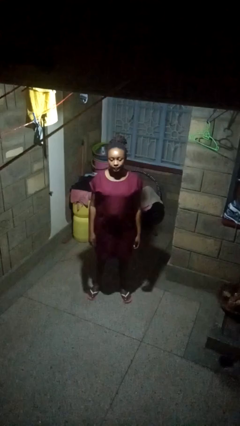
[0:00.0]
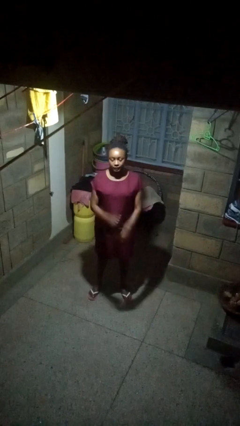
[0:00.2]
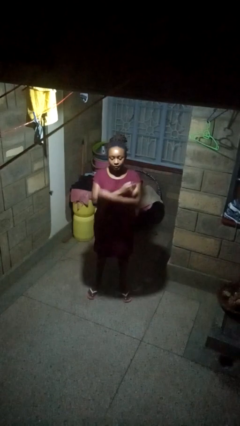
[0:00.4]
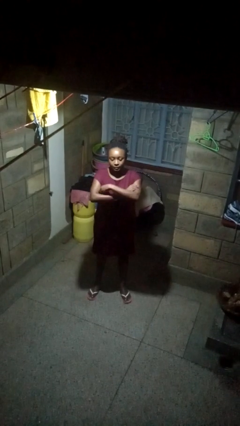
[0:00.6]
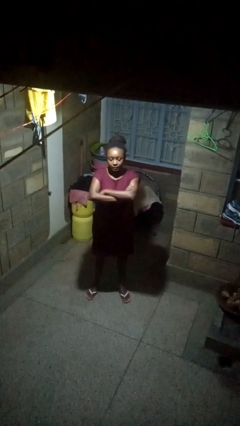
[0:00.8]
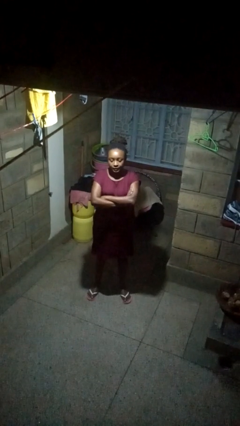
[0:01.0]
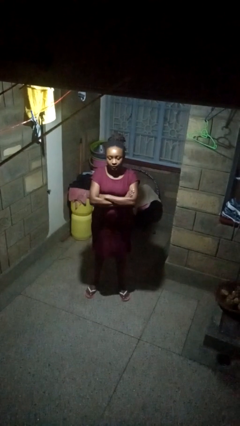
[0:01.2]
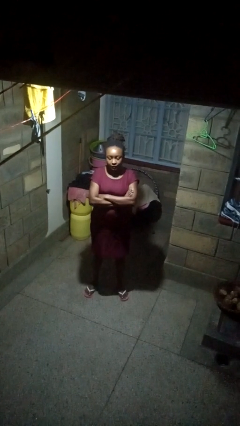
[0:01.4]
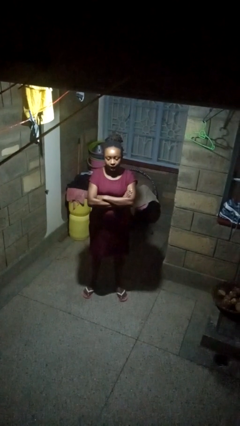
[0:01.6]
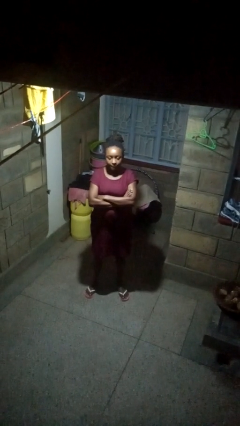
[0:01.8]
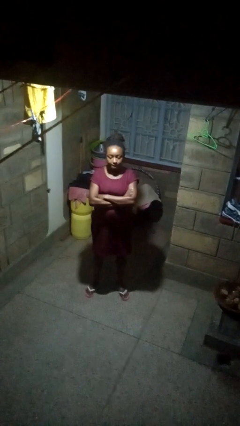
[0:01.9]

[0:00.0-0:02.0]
person crosses arms

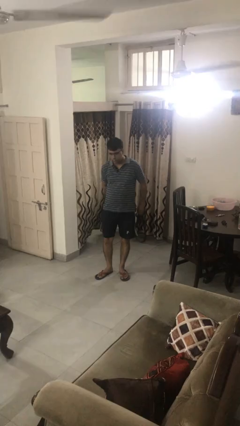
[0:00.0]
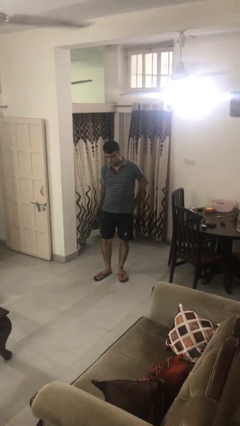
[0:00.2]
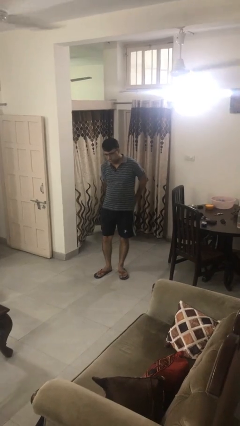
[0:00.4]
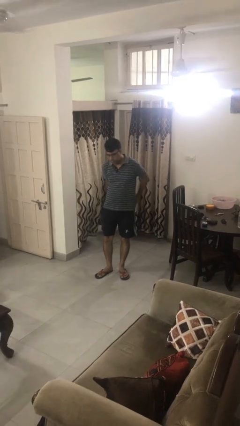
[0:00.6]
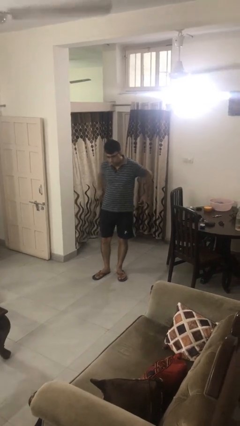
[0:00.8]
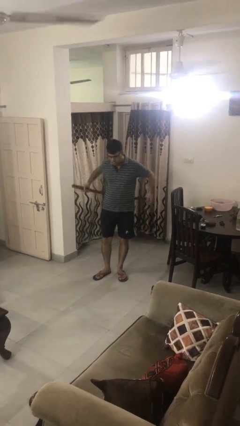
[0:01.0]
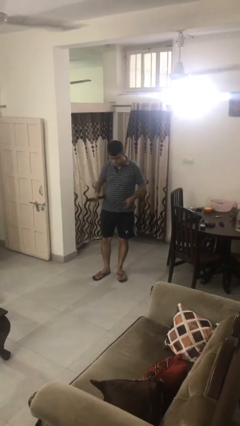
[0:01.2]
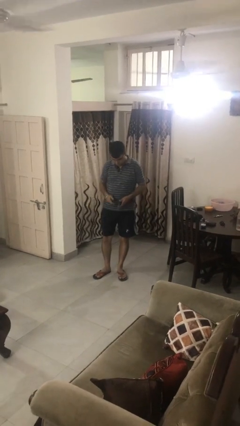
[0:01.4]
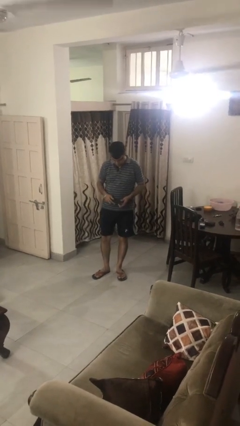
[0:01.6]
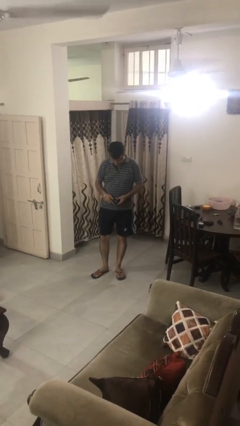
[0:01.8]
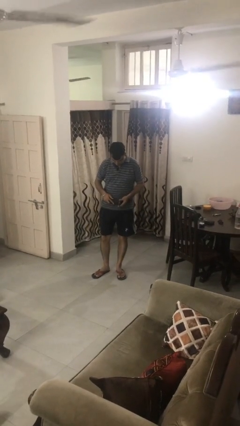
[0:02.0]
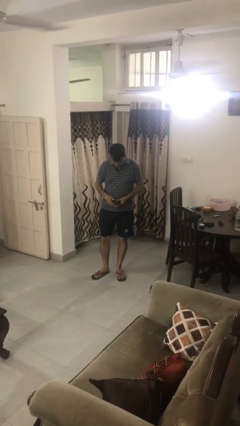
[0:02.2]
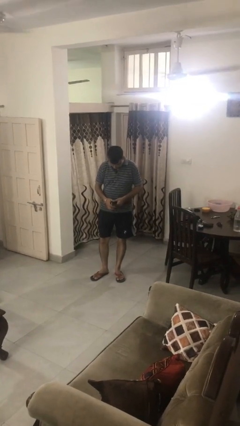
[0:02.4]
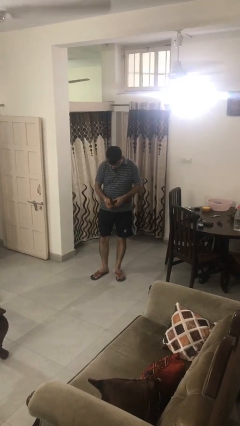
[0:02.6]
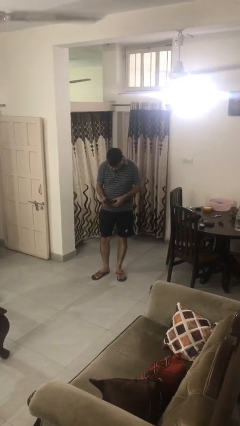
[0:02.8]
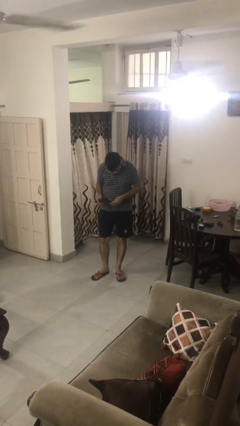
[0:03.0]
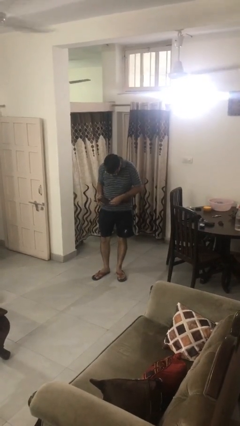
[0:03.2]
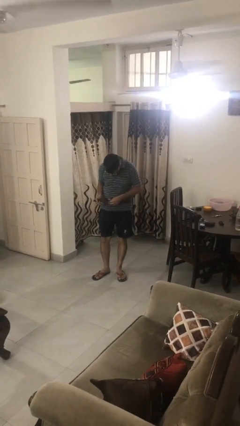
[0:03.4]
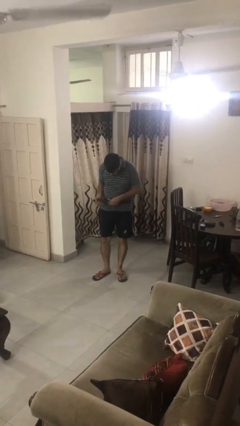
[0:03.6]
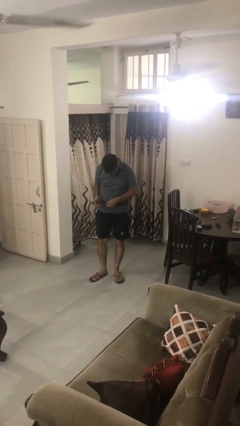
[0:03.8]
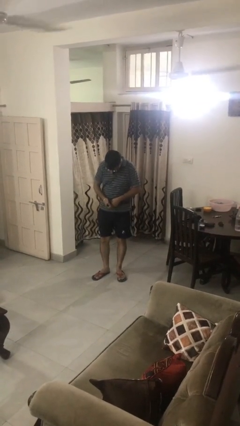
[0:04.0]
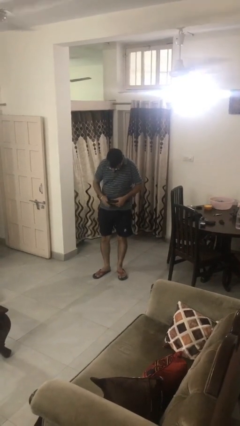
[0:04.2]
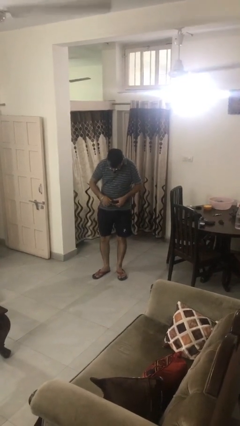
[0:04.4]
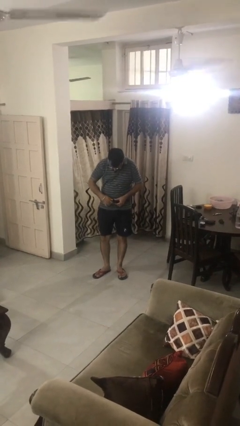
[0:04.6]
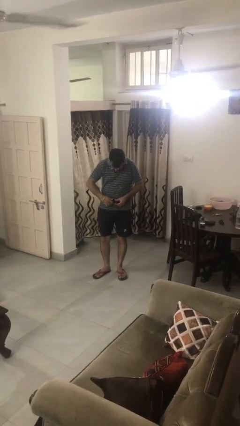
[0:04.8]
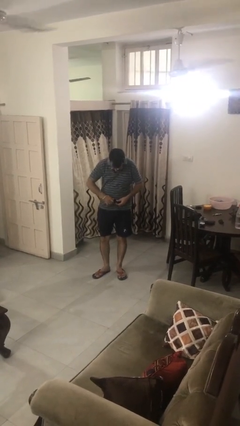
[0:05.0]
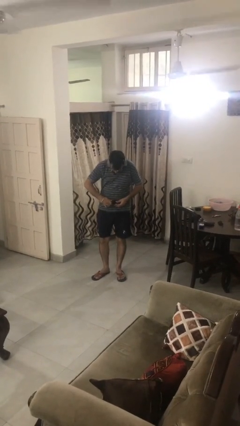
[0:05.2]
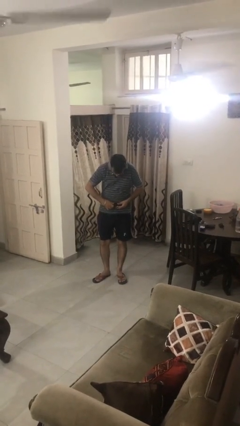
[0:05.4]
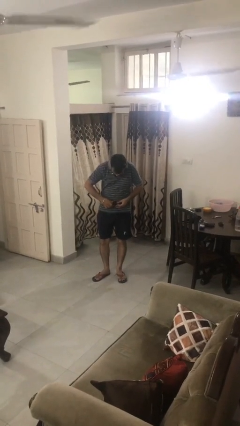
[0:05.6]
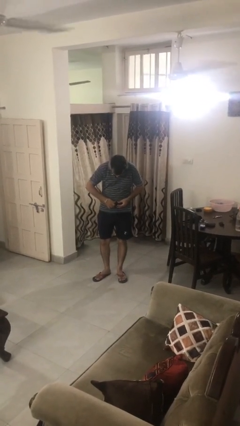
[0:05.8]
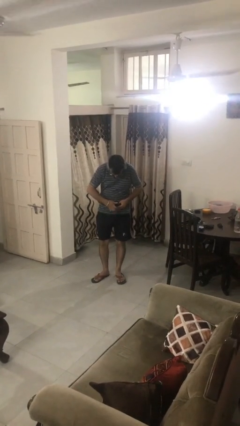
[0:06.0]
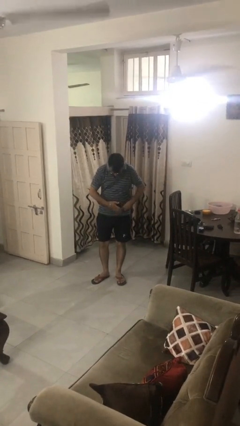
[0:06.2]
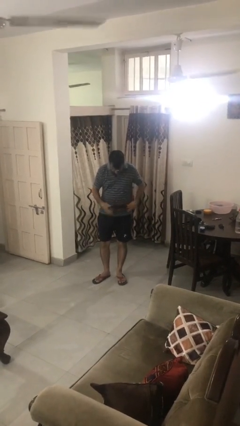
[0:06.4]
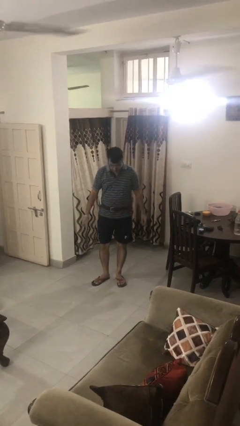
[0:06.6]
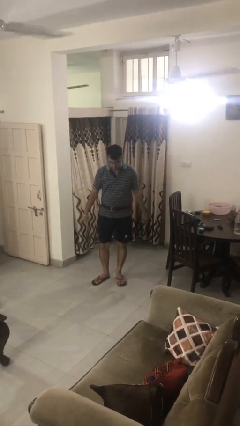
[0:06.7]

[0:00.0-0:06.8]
person puts on belt

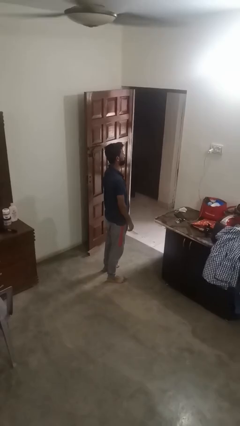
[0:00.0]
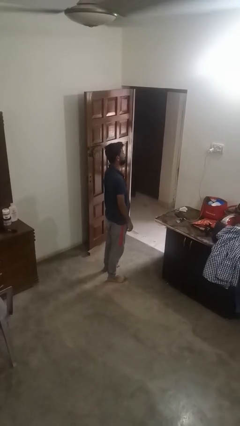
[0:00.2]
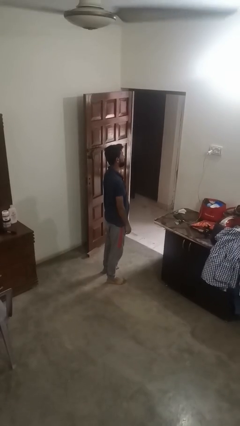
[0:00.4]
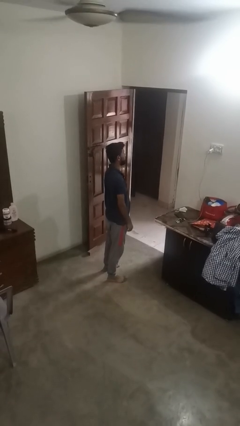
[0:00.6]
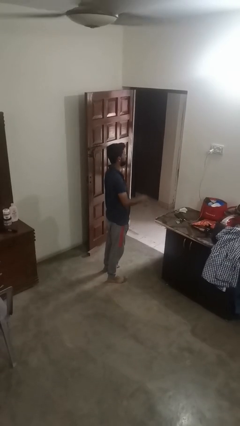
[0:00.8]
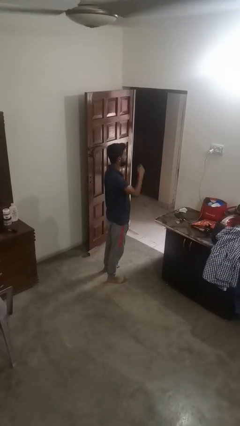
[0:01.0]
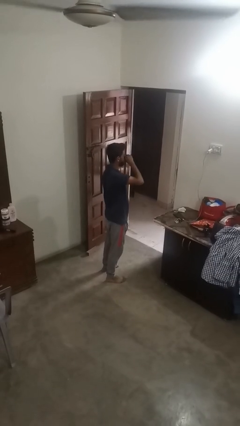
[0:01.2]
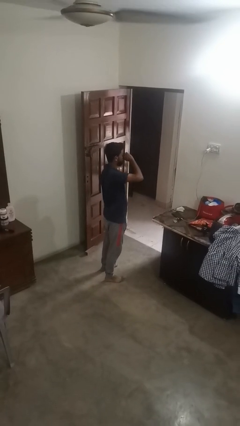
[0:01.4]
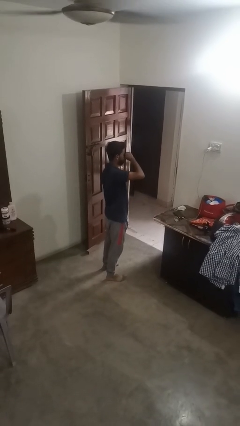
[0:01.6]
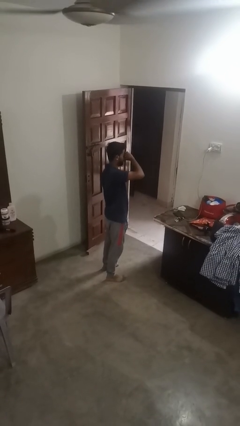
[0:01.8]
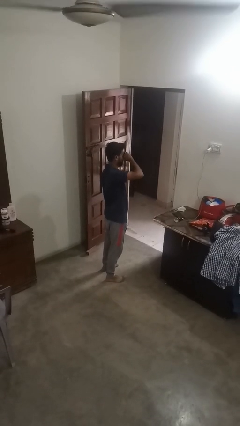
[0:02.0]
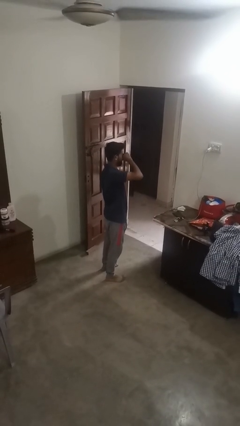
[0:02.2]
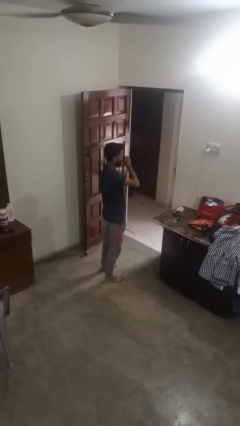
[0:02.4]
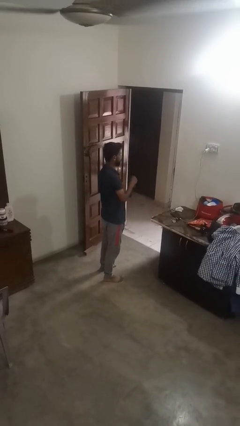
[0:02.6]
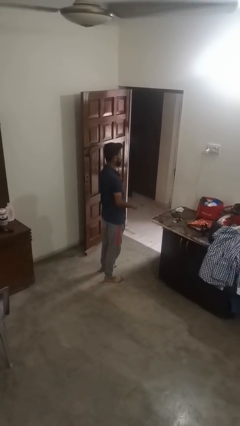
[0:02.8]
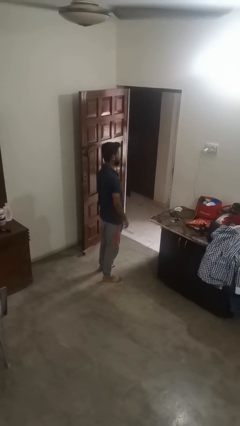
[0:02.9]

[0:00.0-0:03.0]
person rubs eyes

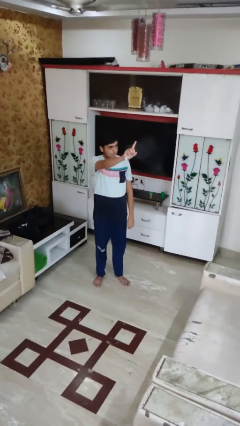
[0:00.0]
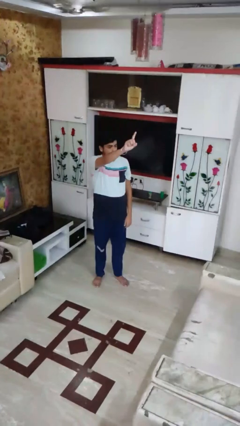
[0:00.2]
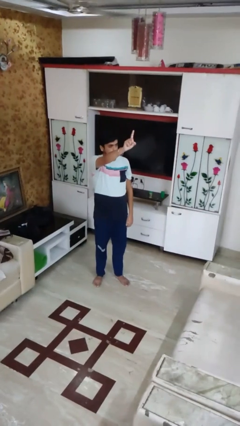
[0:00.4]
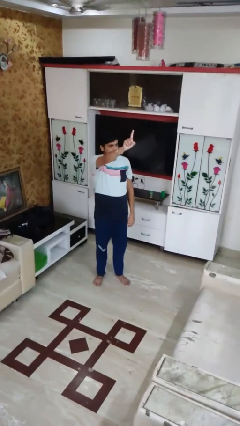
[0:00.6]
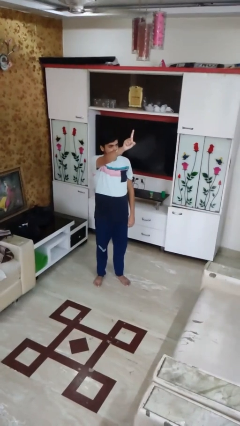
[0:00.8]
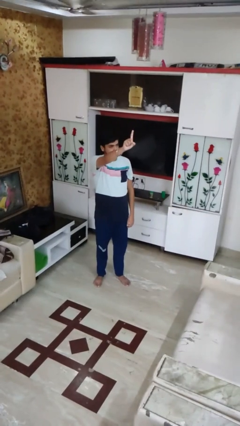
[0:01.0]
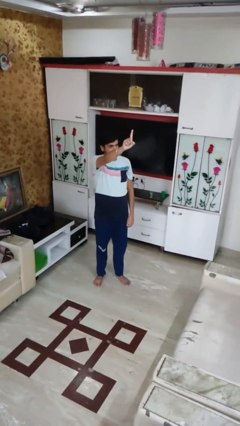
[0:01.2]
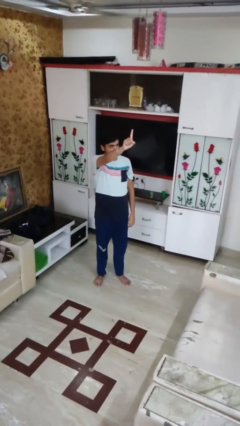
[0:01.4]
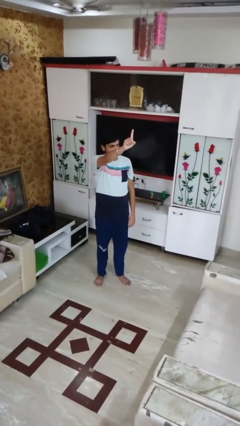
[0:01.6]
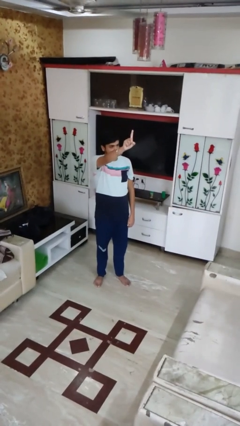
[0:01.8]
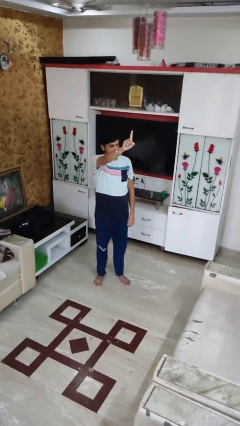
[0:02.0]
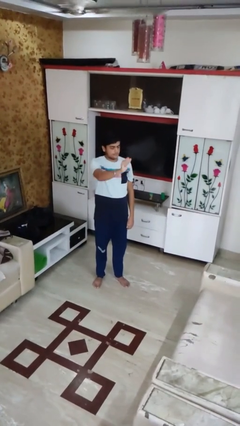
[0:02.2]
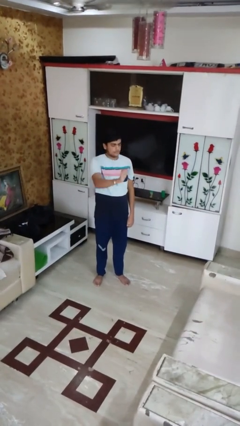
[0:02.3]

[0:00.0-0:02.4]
person gestures number one

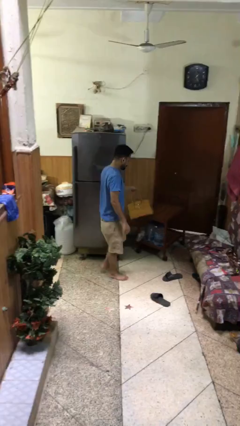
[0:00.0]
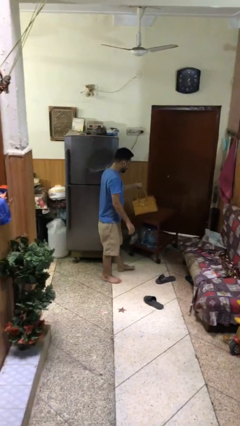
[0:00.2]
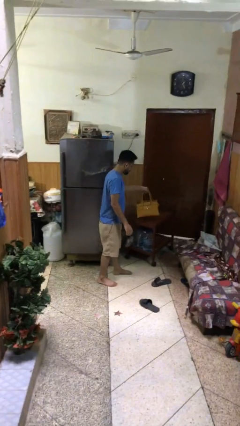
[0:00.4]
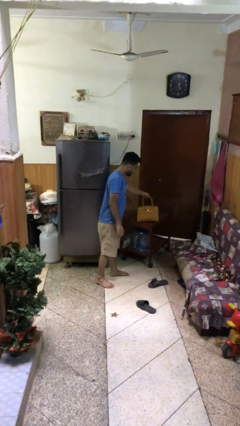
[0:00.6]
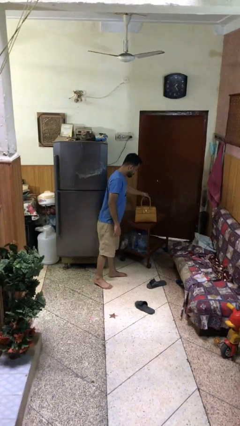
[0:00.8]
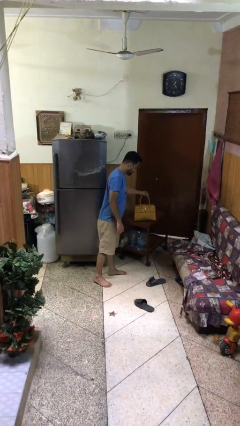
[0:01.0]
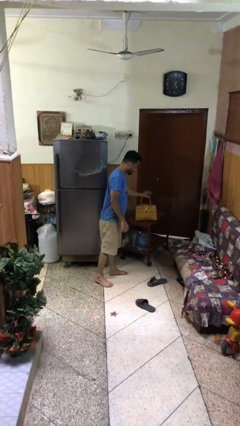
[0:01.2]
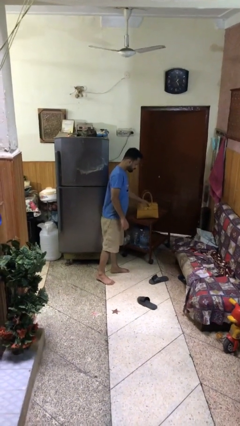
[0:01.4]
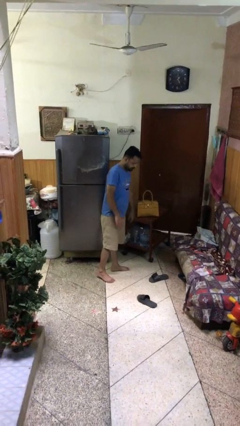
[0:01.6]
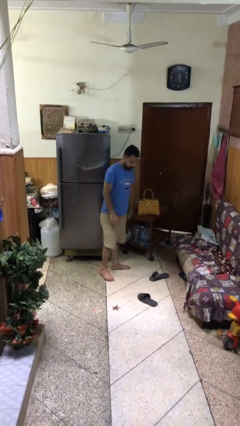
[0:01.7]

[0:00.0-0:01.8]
person puts down object on table

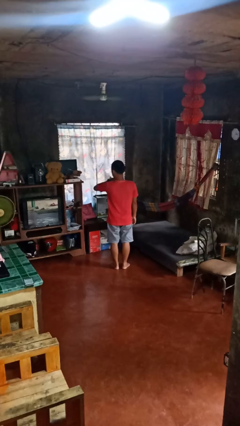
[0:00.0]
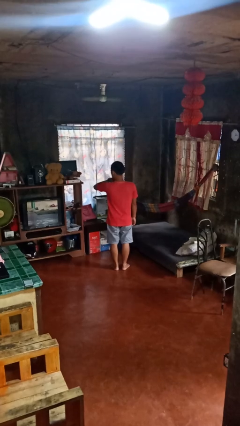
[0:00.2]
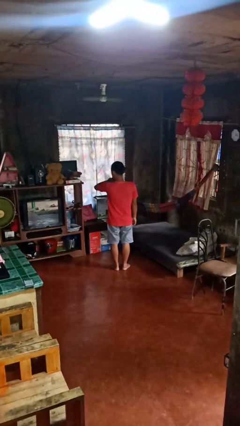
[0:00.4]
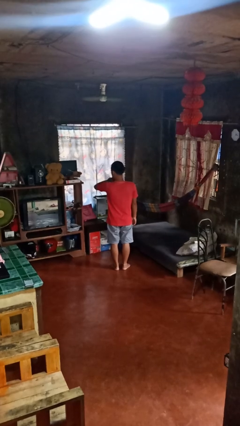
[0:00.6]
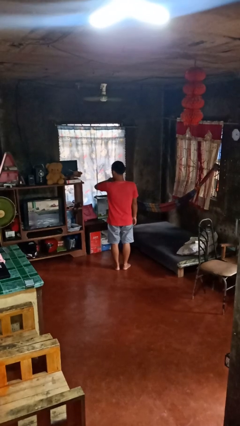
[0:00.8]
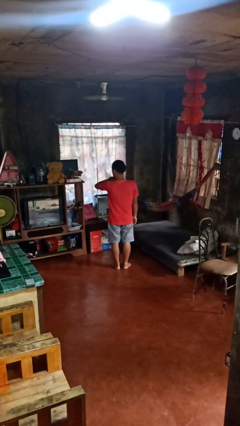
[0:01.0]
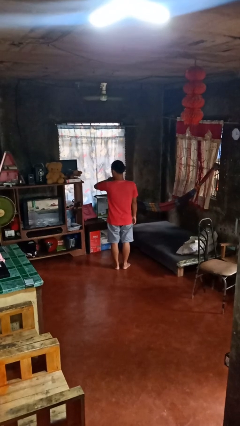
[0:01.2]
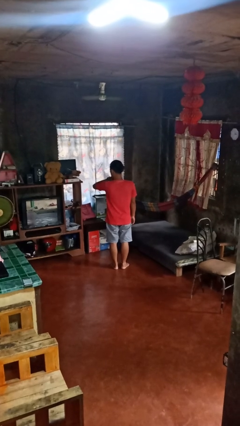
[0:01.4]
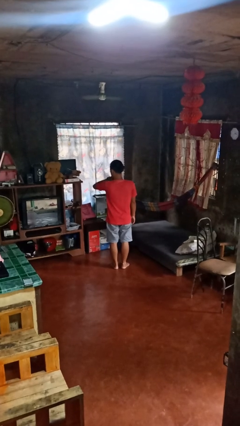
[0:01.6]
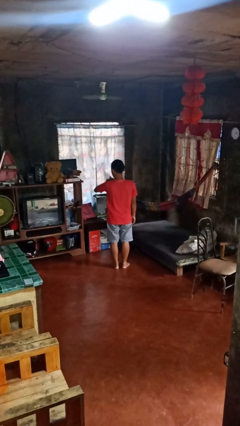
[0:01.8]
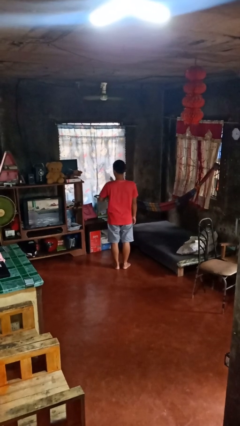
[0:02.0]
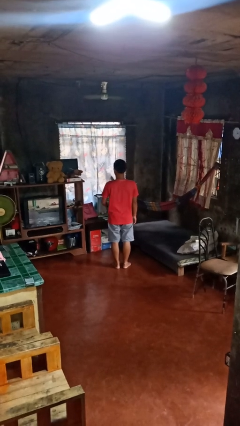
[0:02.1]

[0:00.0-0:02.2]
person looks at wristwatch
